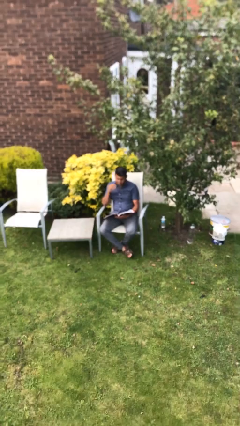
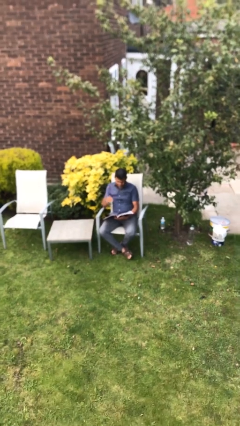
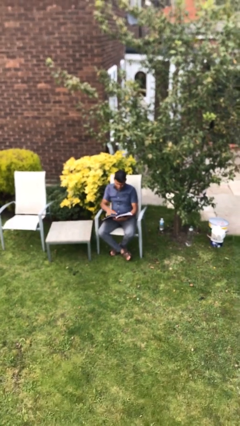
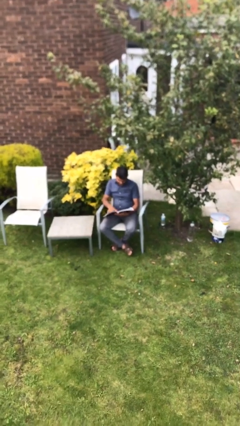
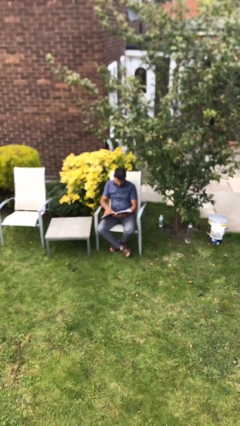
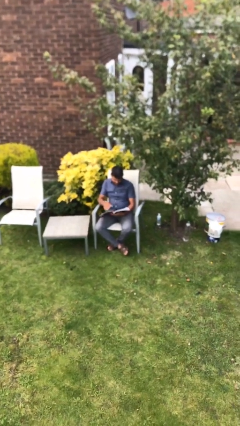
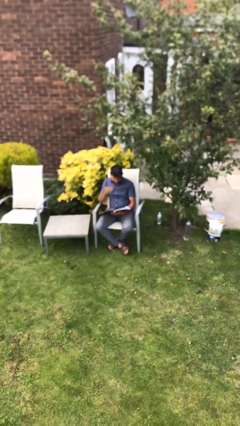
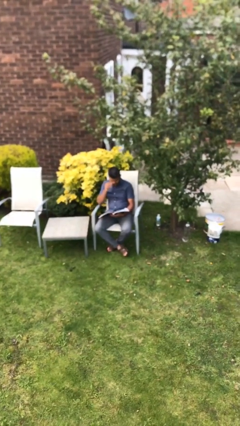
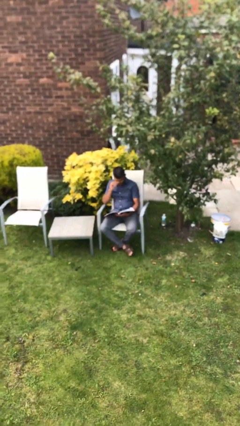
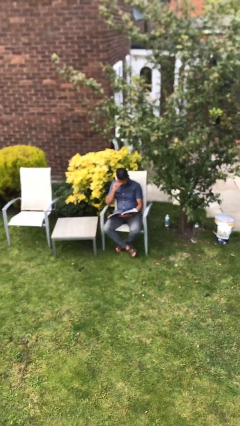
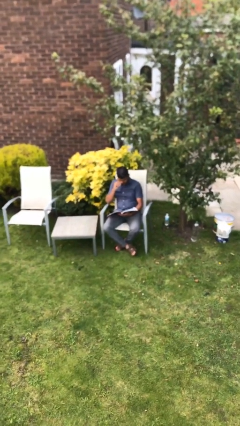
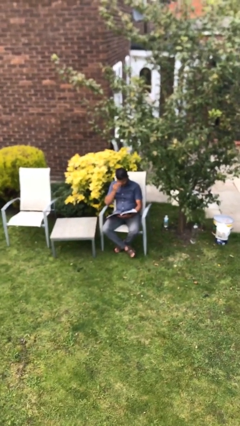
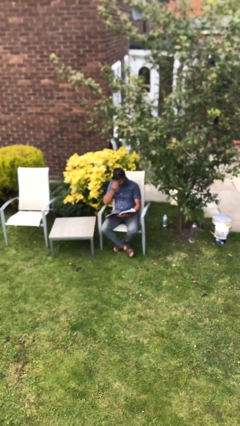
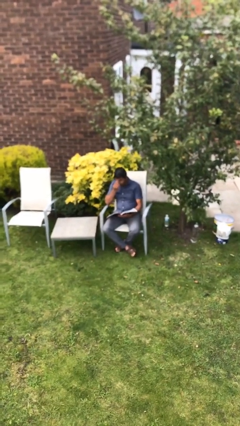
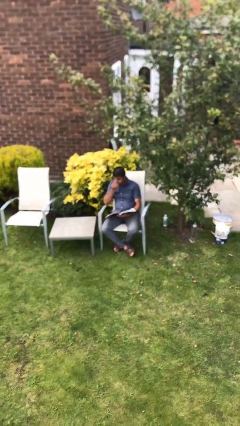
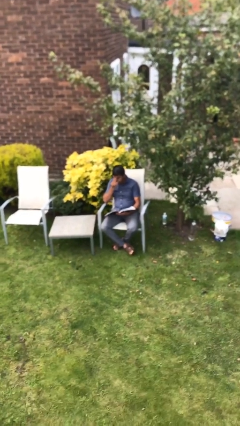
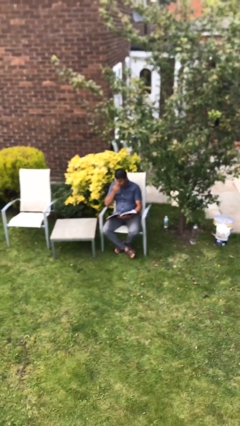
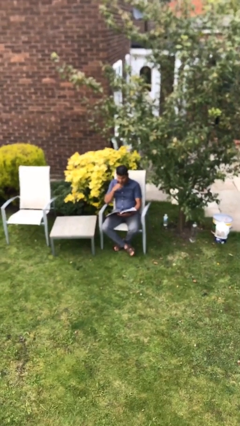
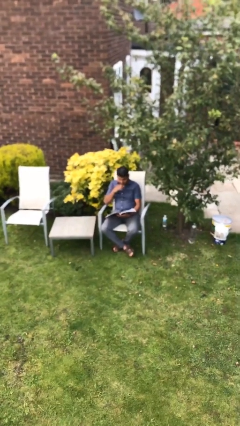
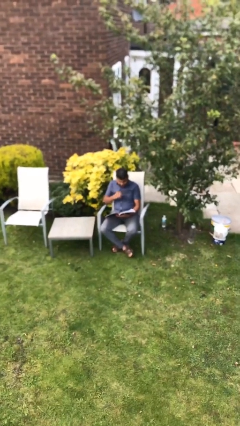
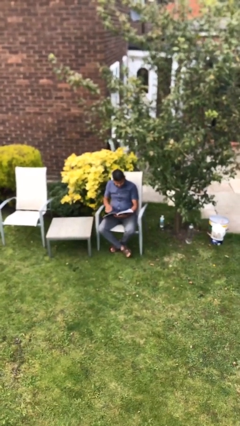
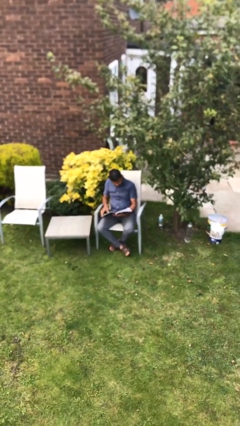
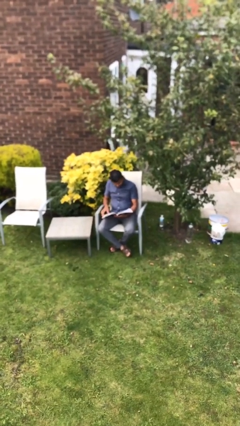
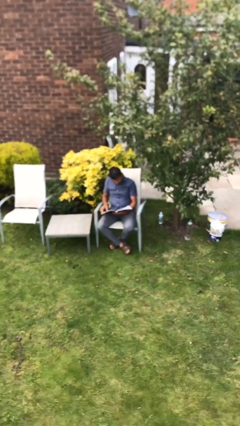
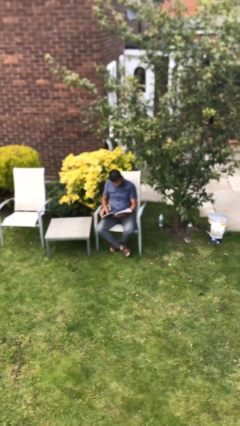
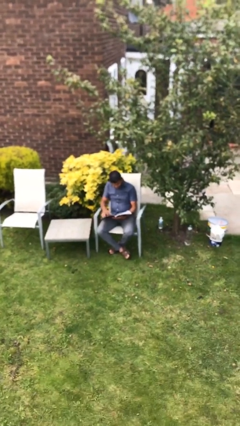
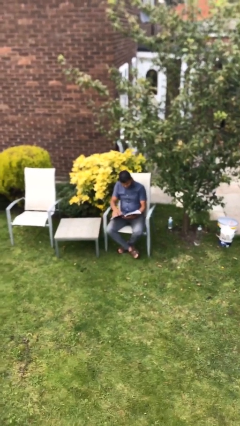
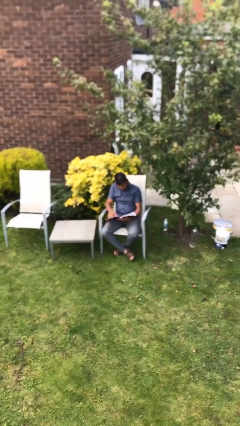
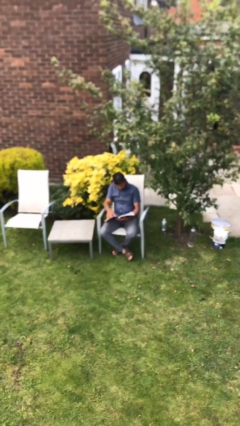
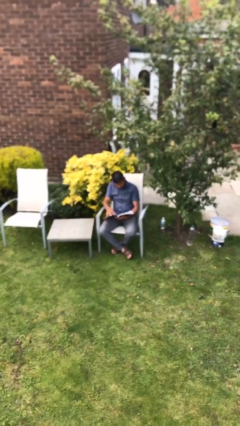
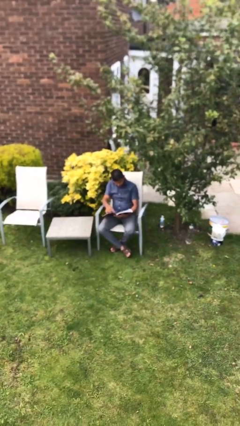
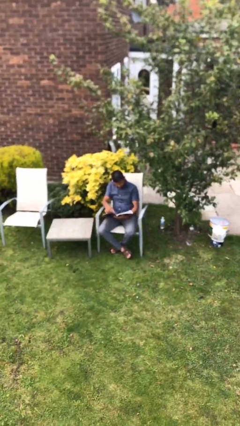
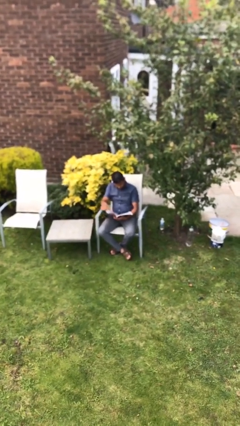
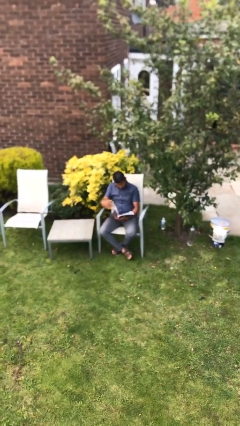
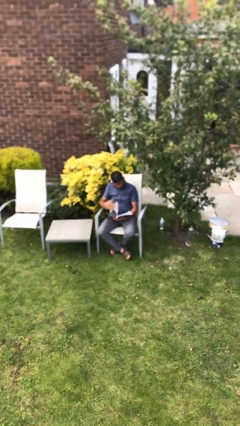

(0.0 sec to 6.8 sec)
person reads document

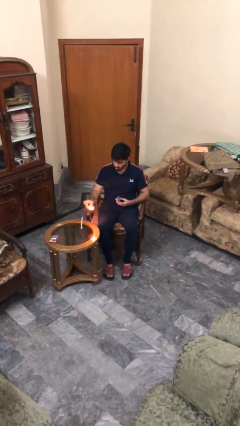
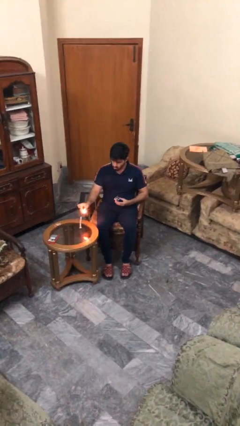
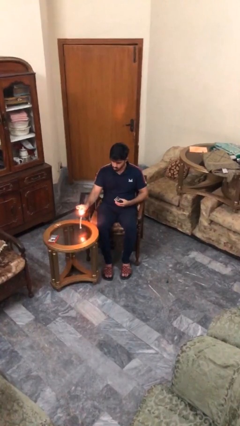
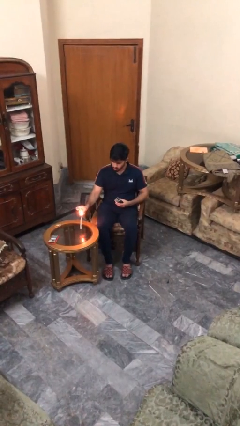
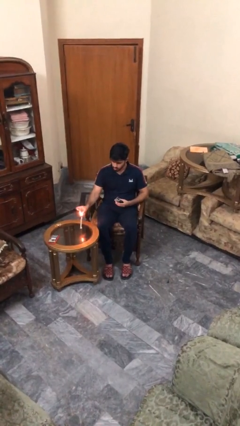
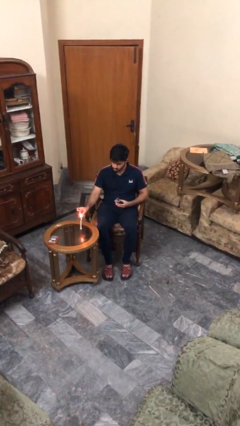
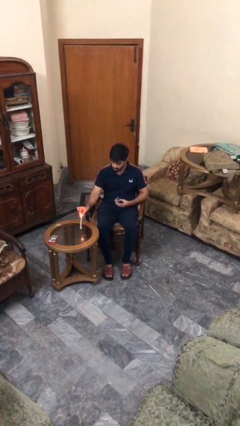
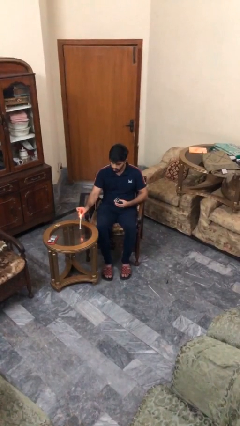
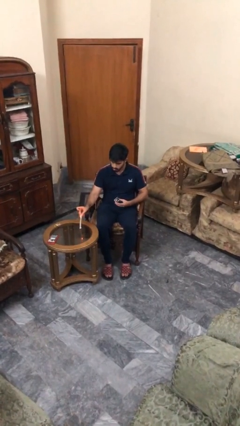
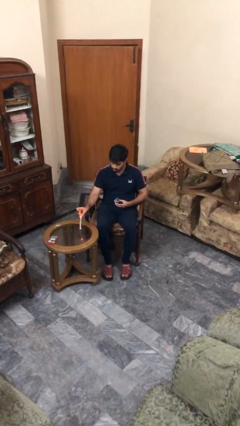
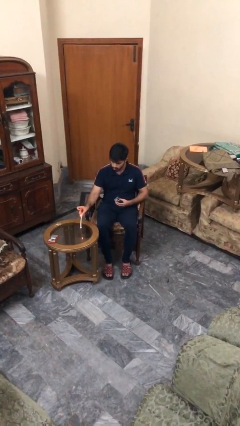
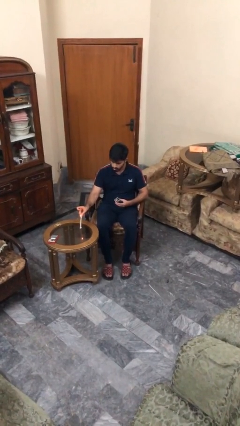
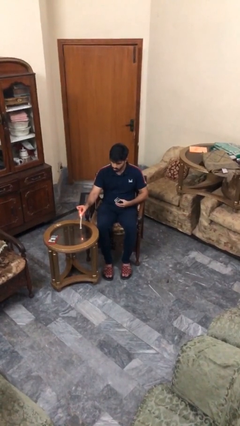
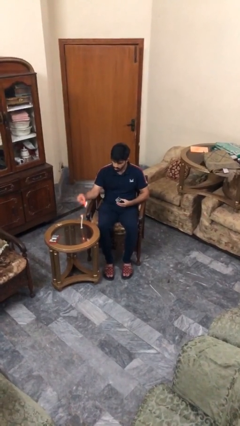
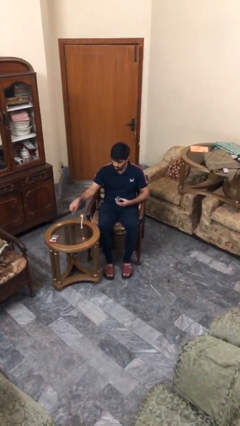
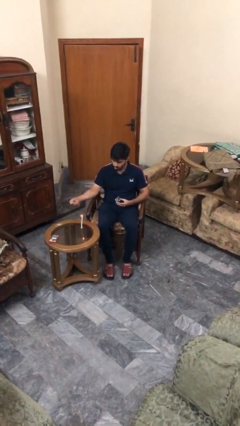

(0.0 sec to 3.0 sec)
person lights candle

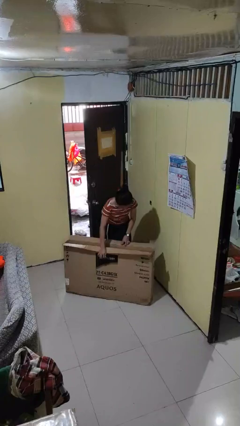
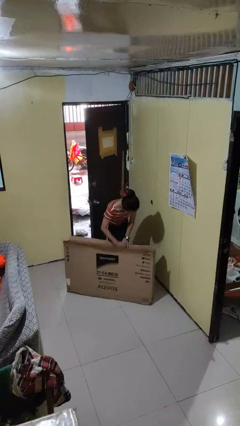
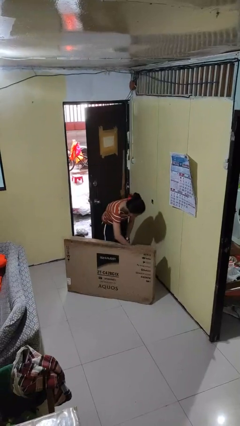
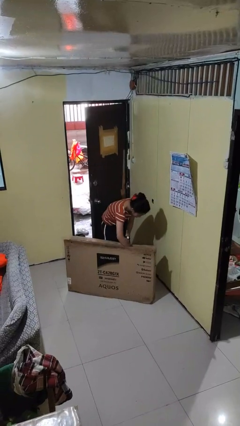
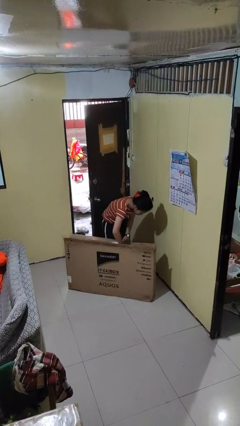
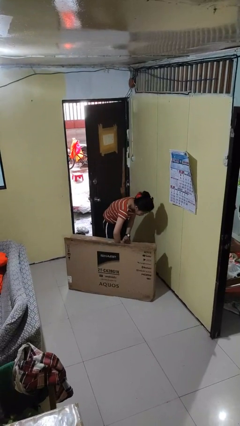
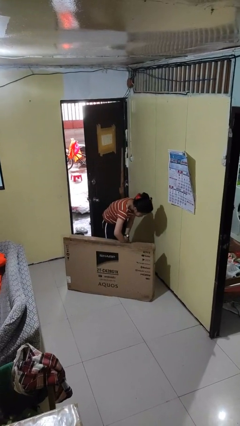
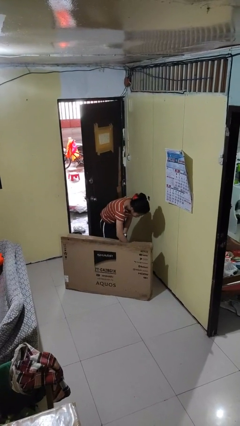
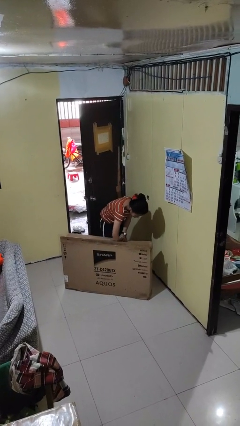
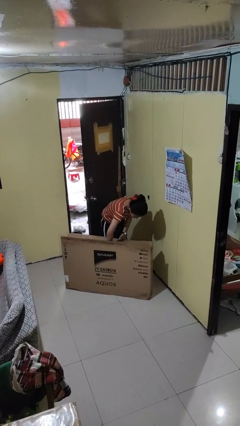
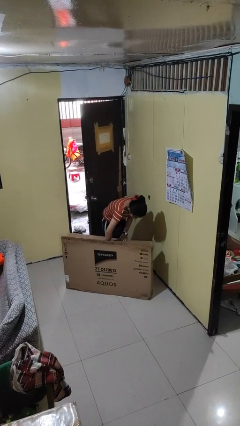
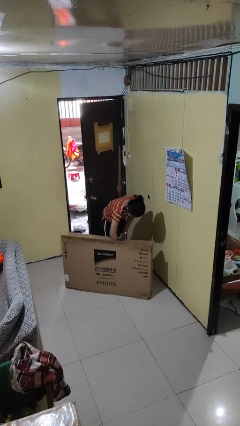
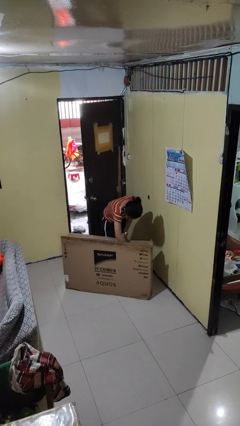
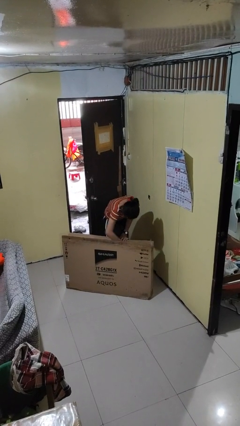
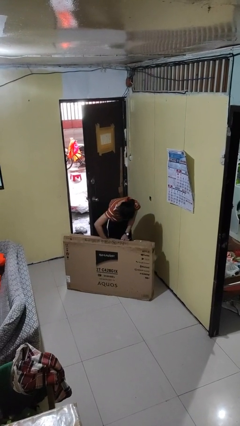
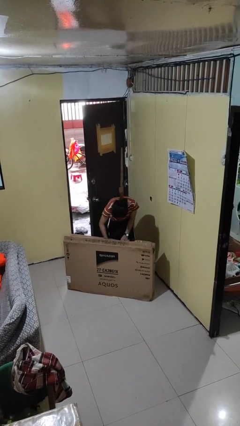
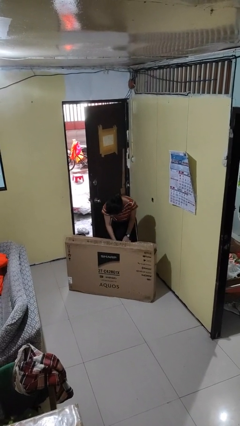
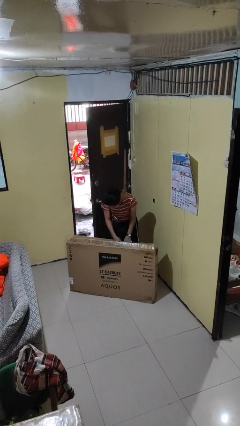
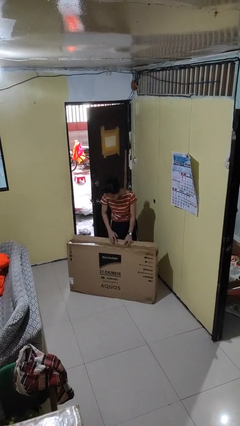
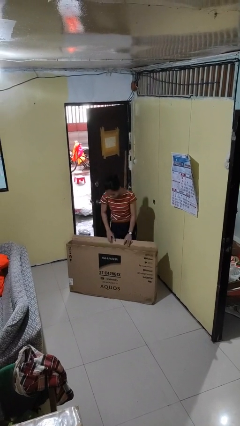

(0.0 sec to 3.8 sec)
person searches in box

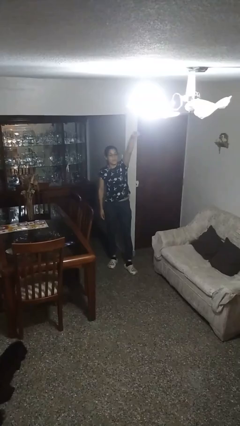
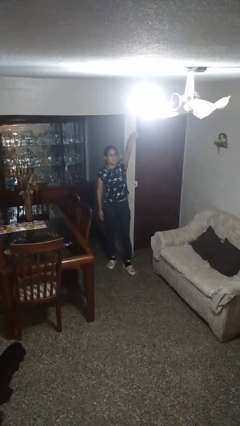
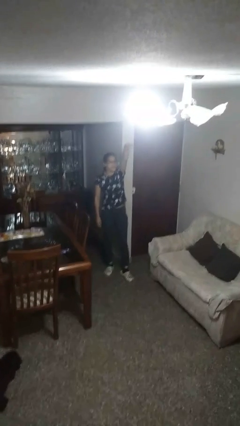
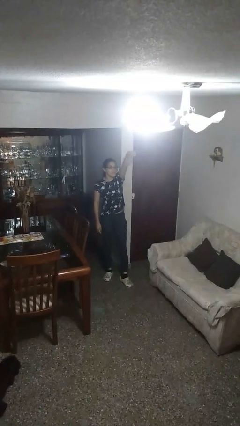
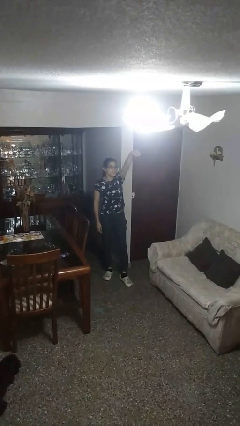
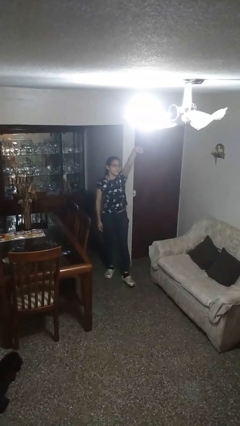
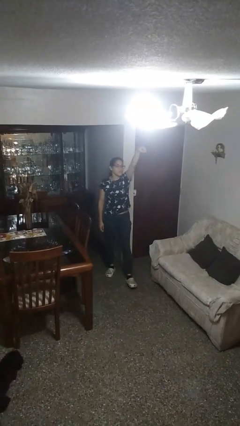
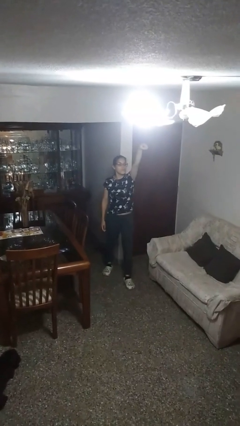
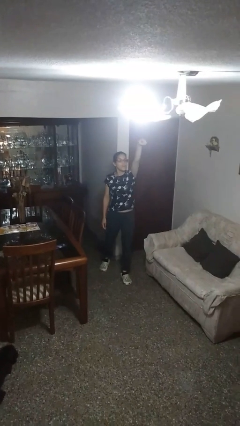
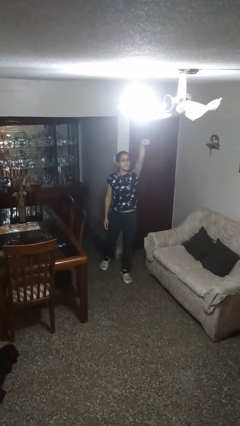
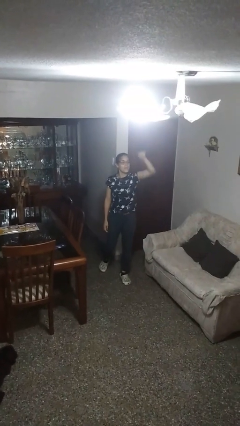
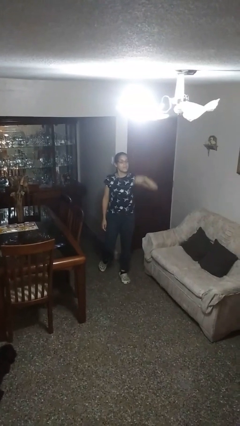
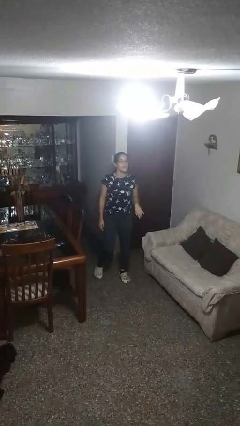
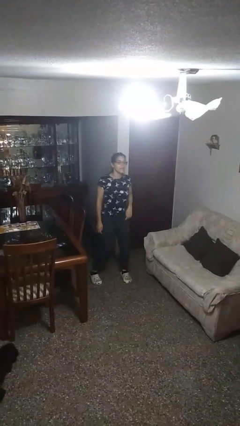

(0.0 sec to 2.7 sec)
person points at person

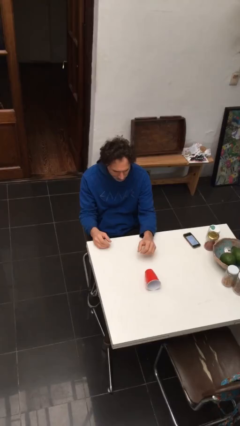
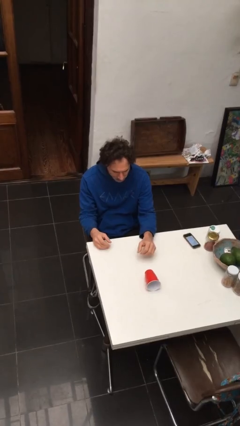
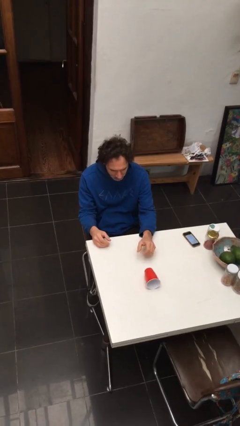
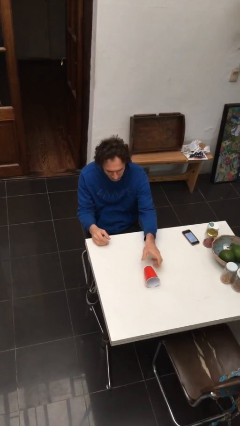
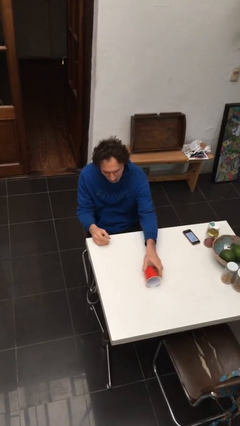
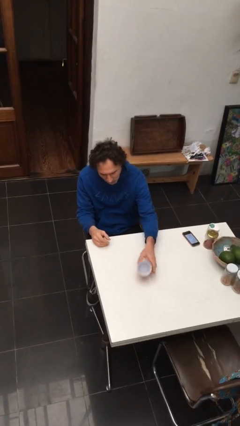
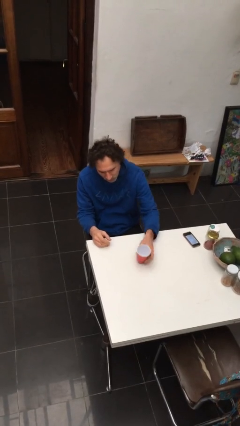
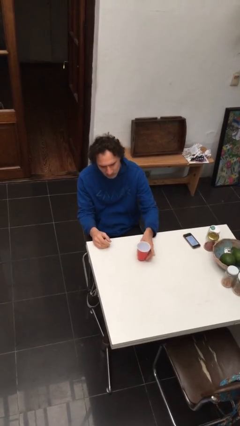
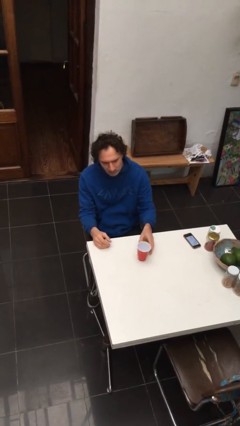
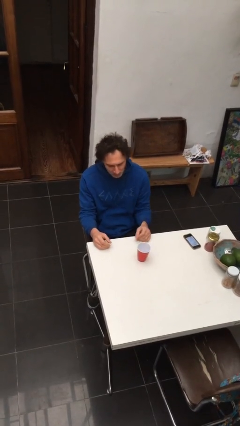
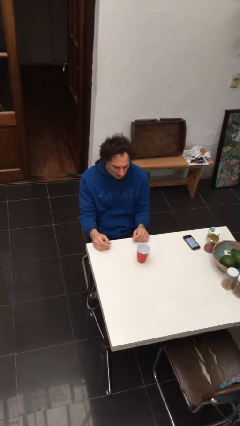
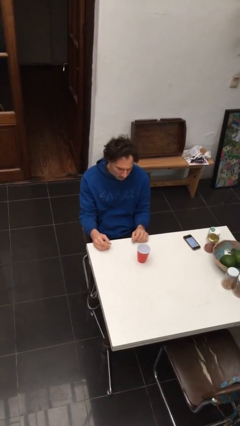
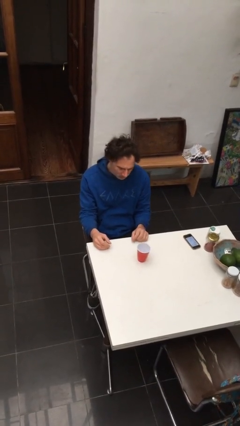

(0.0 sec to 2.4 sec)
person sets upright glass
